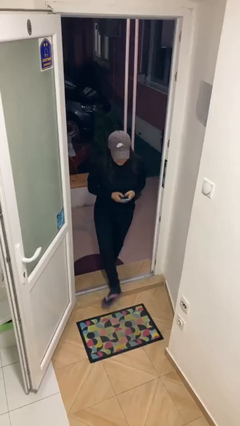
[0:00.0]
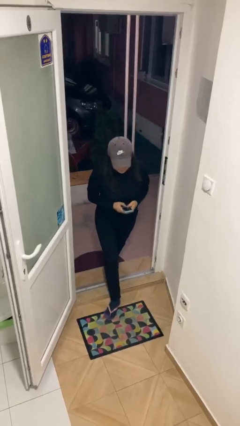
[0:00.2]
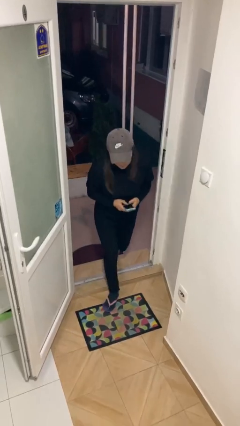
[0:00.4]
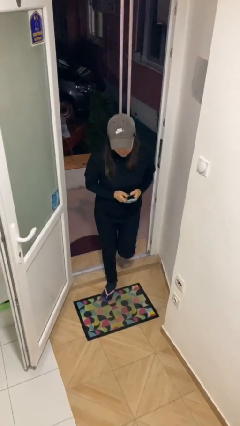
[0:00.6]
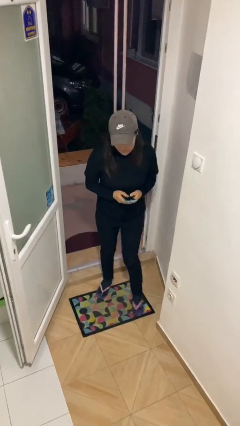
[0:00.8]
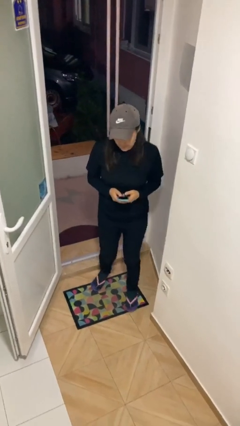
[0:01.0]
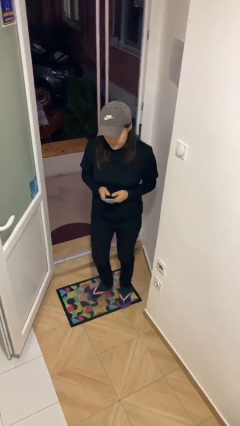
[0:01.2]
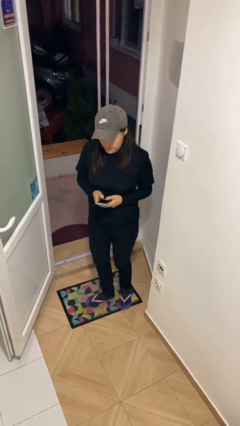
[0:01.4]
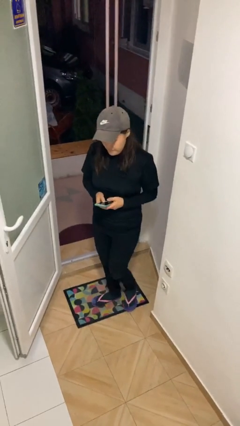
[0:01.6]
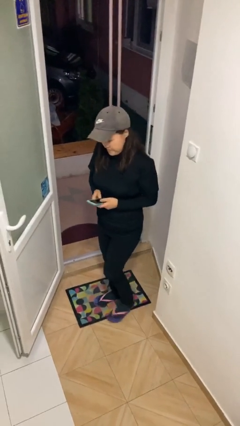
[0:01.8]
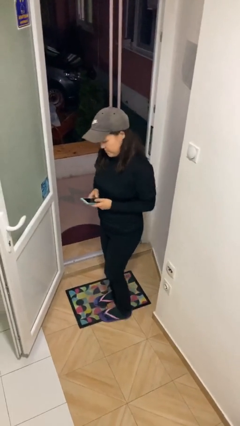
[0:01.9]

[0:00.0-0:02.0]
person enters scene through structure

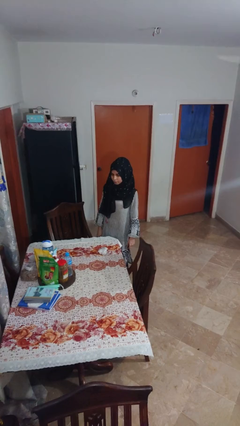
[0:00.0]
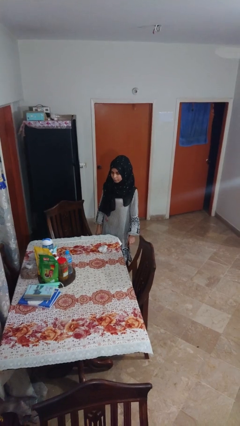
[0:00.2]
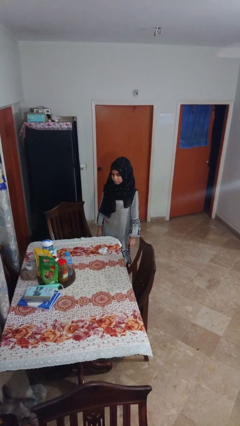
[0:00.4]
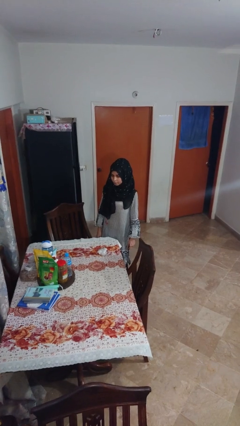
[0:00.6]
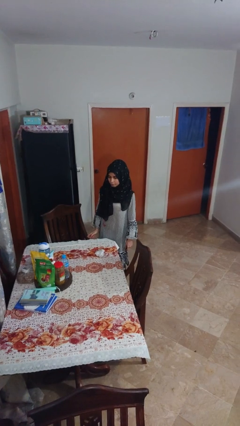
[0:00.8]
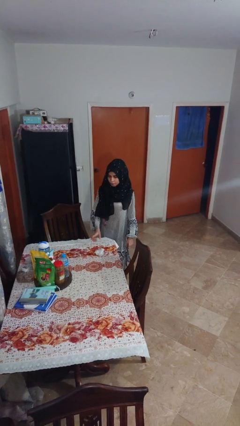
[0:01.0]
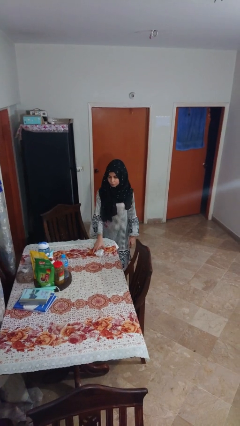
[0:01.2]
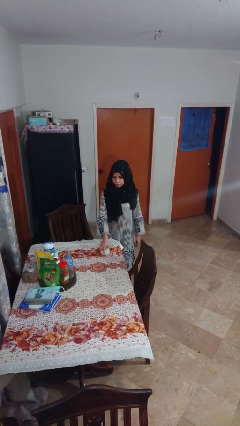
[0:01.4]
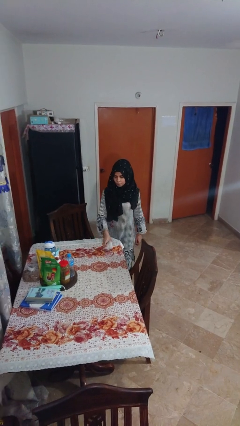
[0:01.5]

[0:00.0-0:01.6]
person picks up object from table

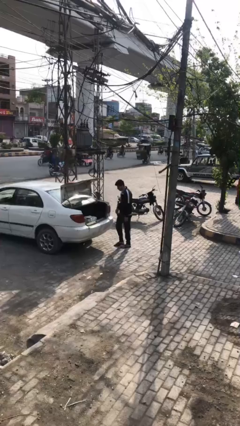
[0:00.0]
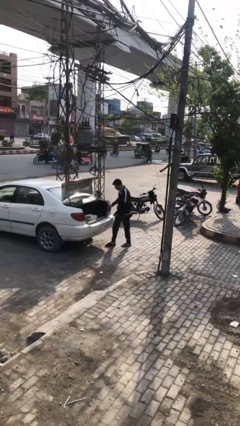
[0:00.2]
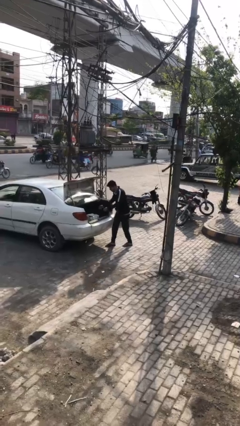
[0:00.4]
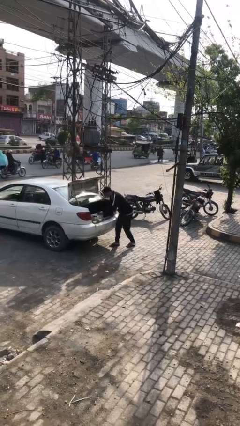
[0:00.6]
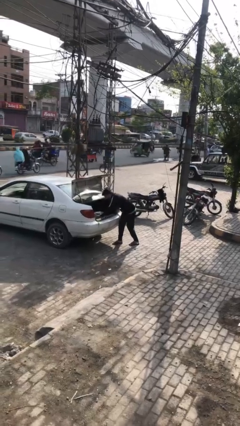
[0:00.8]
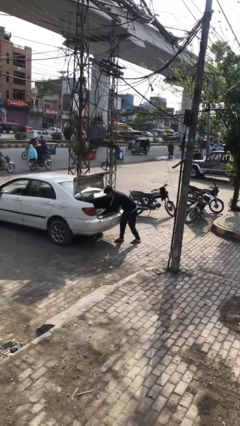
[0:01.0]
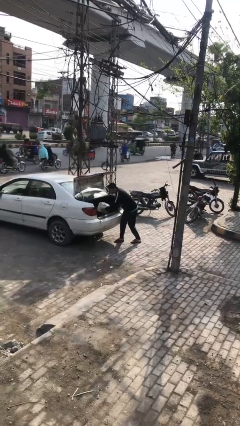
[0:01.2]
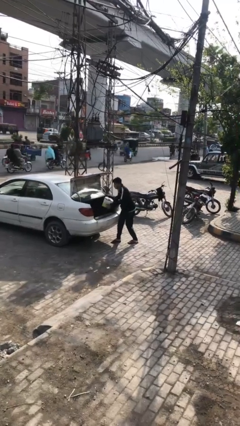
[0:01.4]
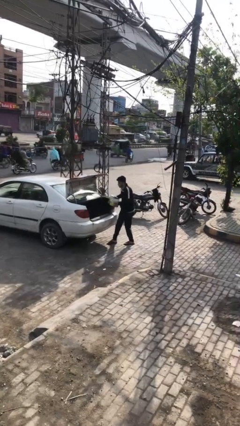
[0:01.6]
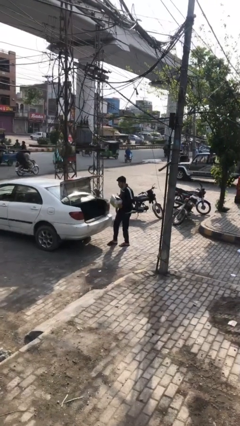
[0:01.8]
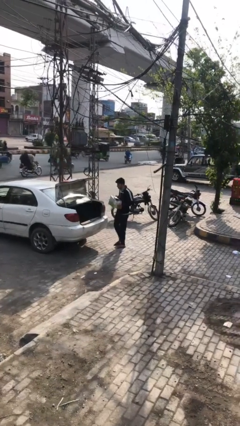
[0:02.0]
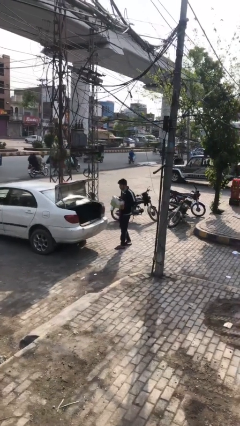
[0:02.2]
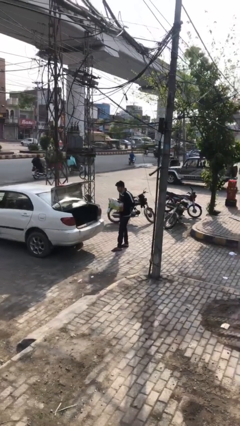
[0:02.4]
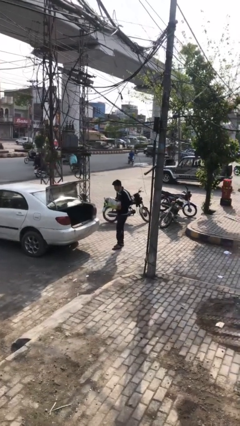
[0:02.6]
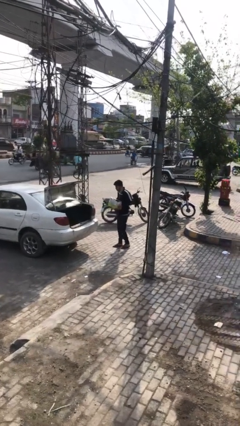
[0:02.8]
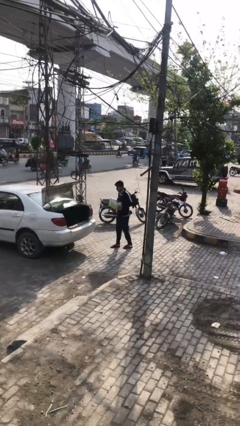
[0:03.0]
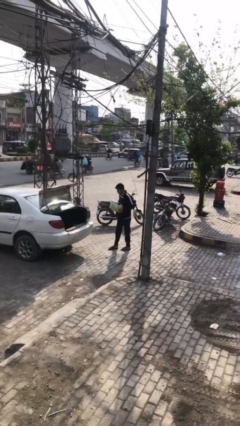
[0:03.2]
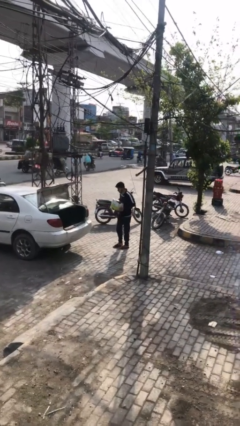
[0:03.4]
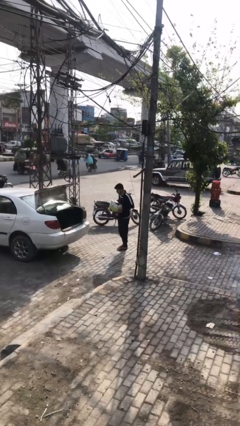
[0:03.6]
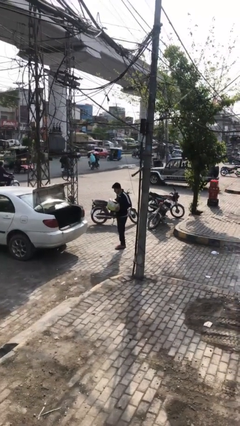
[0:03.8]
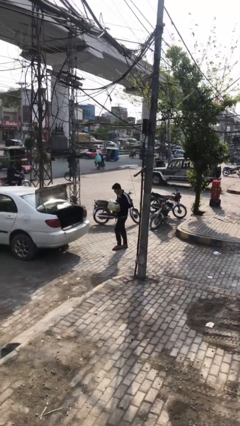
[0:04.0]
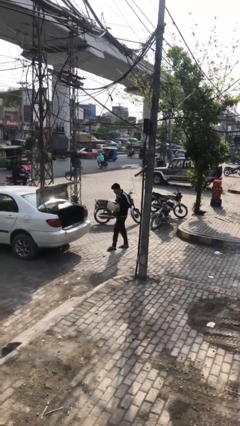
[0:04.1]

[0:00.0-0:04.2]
person unloads car

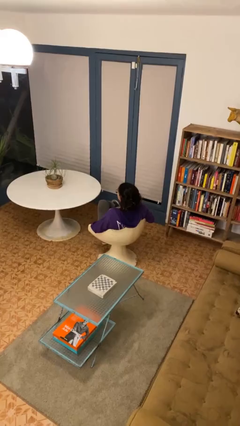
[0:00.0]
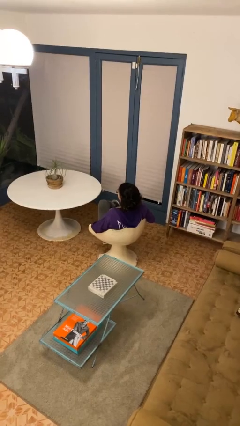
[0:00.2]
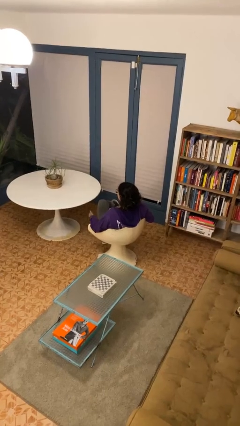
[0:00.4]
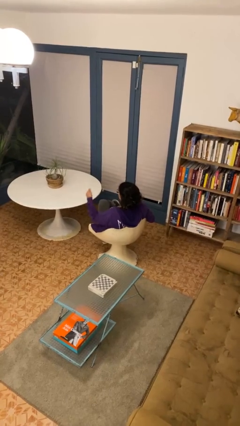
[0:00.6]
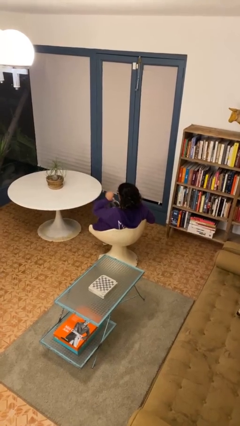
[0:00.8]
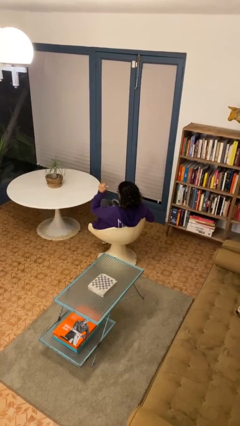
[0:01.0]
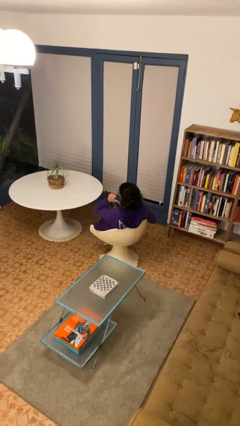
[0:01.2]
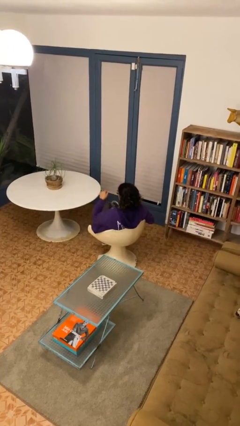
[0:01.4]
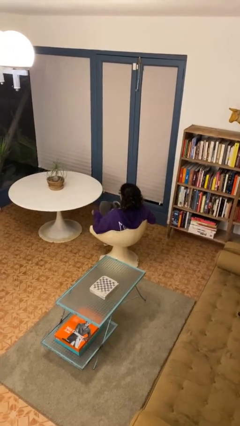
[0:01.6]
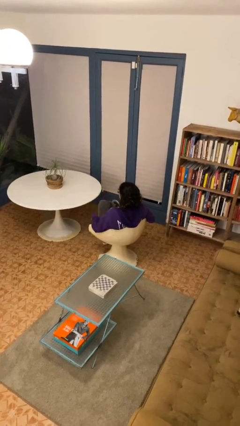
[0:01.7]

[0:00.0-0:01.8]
person gestures behind me

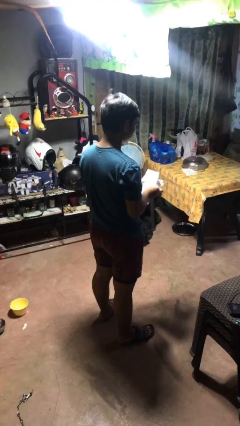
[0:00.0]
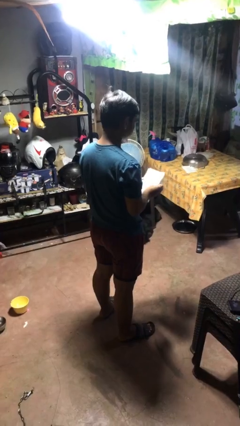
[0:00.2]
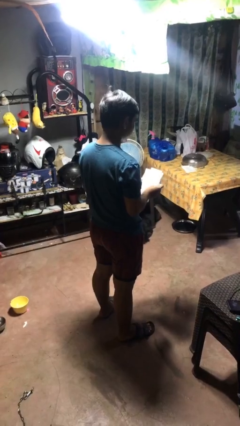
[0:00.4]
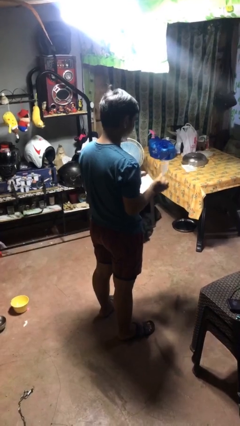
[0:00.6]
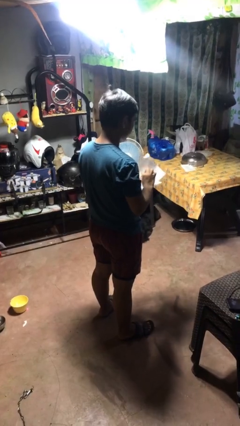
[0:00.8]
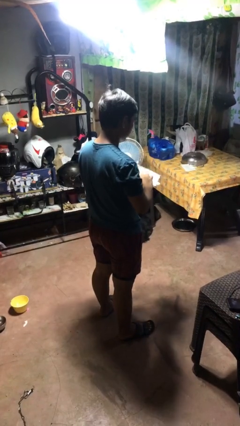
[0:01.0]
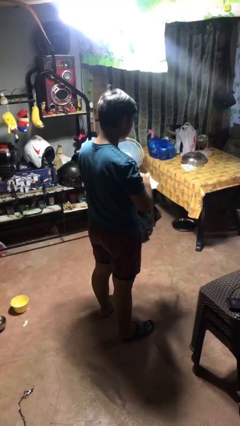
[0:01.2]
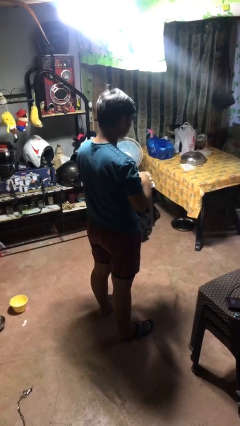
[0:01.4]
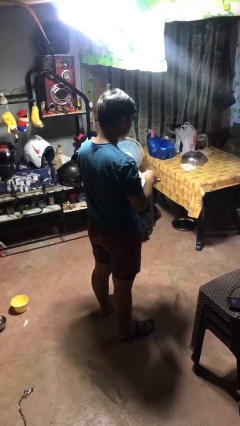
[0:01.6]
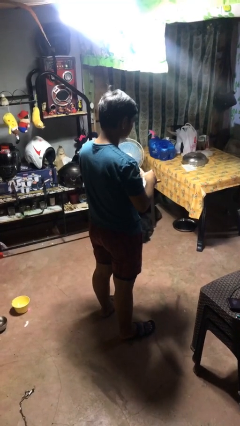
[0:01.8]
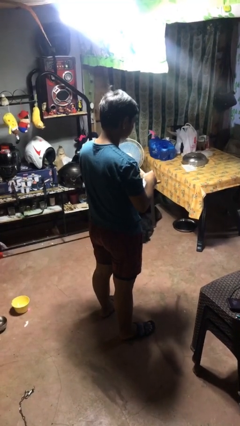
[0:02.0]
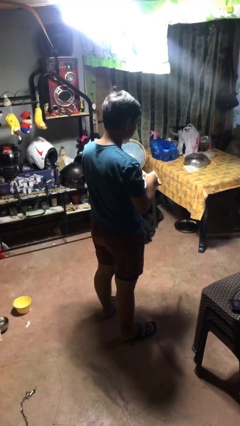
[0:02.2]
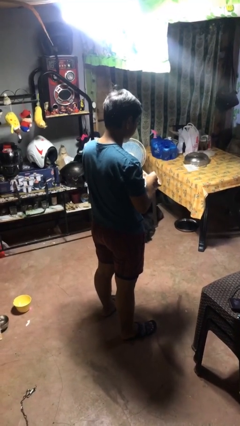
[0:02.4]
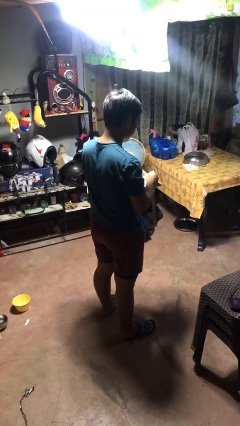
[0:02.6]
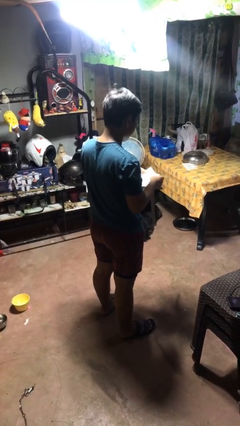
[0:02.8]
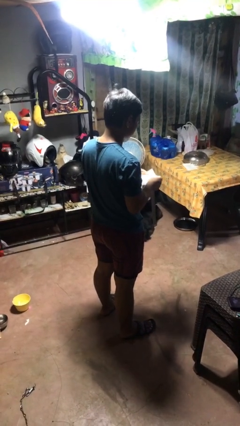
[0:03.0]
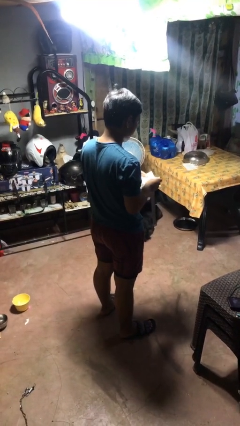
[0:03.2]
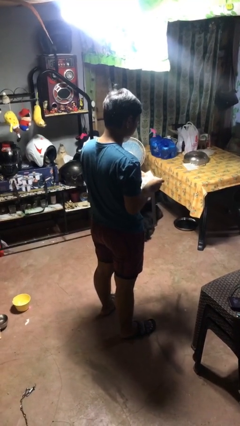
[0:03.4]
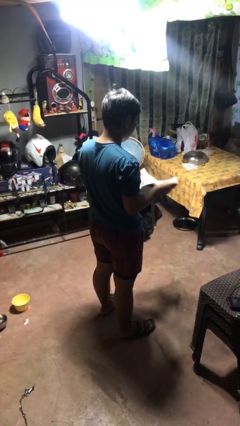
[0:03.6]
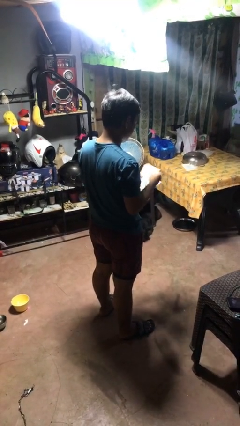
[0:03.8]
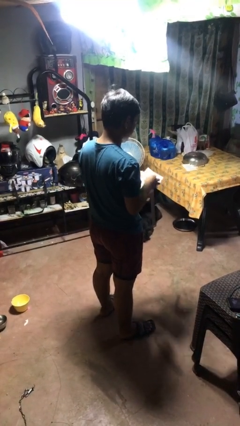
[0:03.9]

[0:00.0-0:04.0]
person tears paper

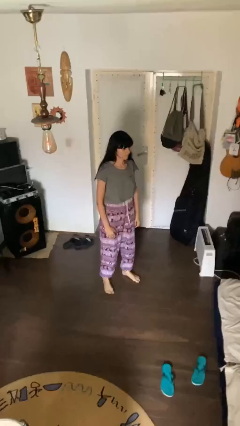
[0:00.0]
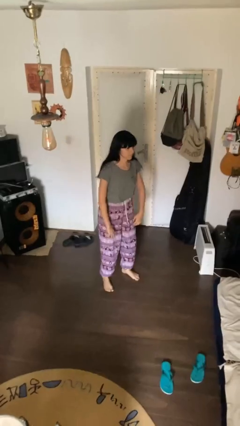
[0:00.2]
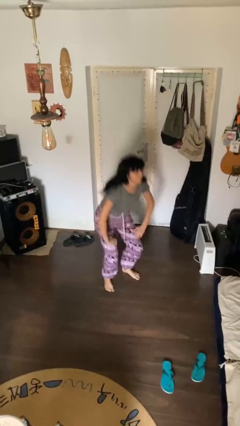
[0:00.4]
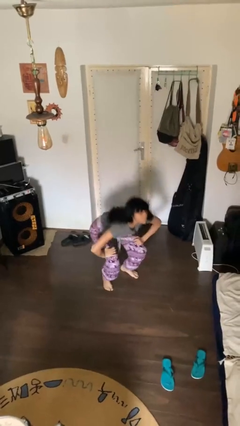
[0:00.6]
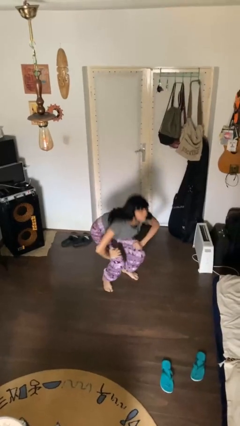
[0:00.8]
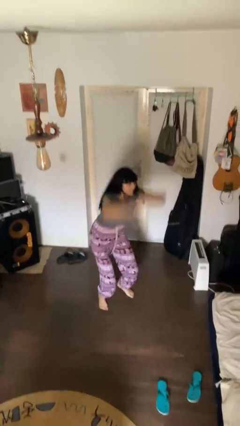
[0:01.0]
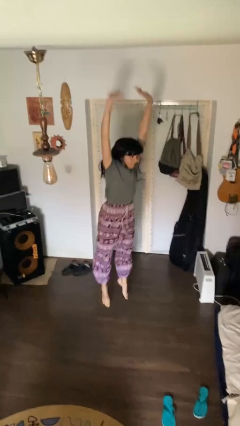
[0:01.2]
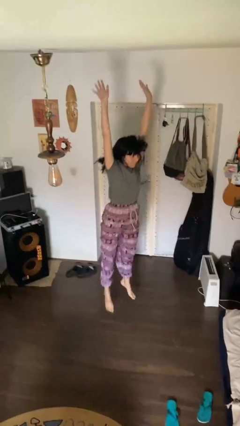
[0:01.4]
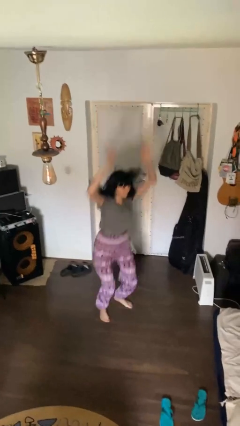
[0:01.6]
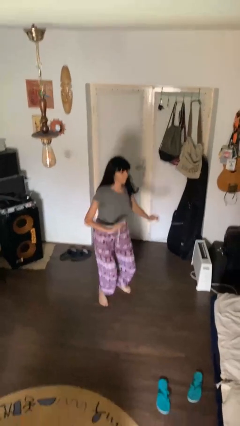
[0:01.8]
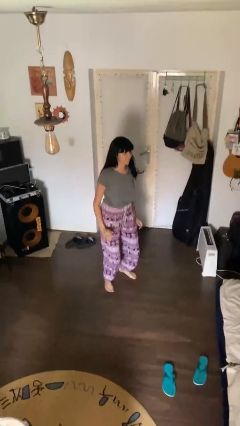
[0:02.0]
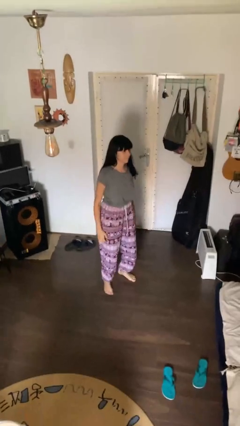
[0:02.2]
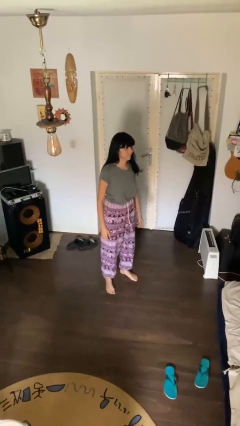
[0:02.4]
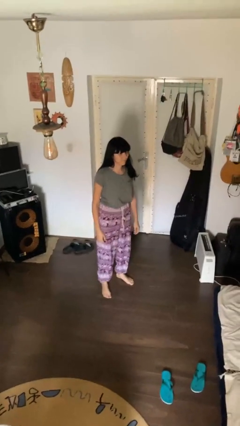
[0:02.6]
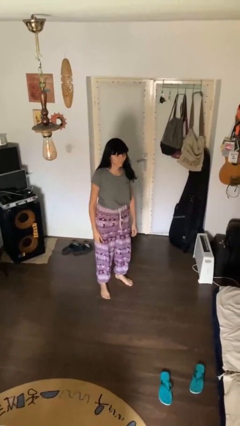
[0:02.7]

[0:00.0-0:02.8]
person jumps

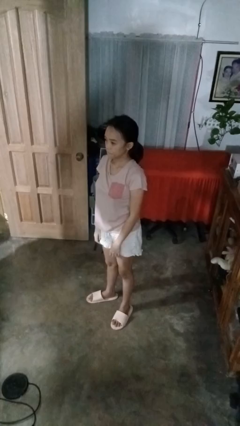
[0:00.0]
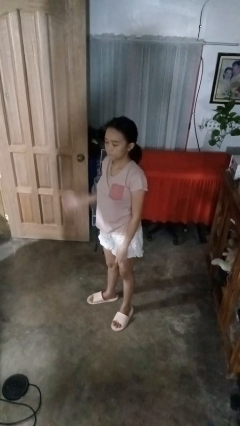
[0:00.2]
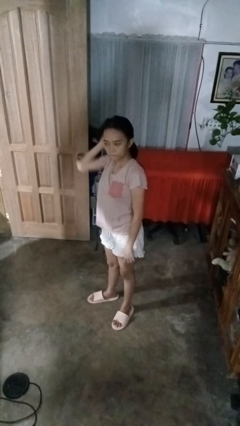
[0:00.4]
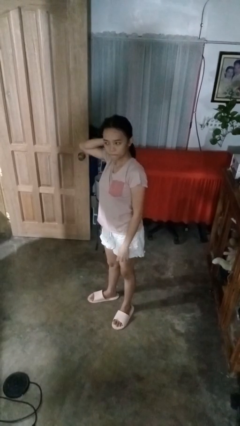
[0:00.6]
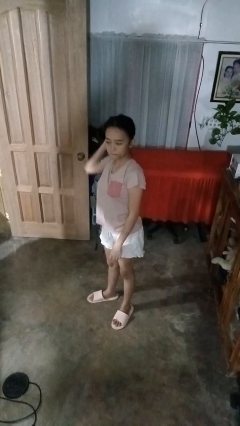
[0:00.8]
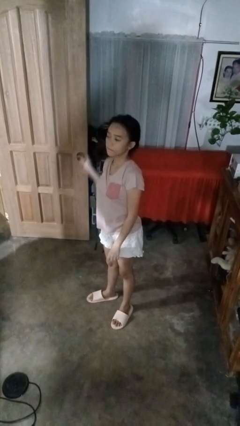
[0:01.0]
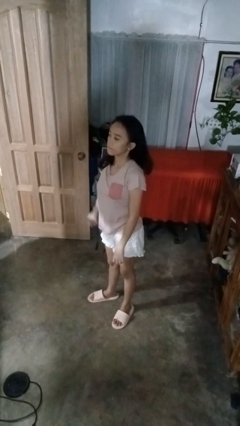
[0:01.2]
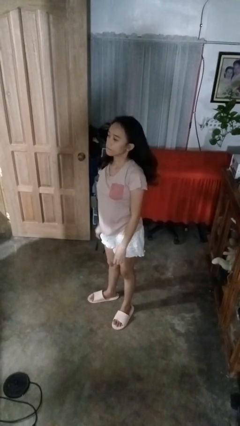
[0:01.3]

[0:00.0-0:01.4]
person takes off hairtie
